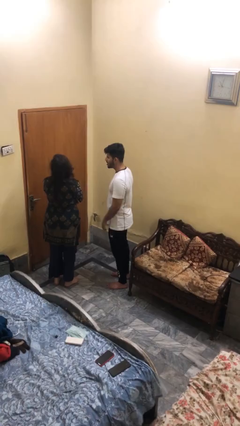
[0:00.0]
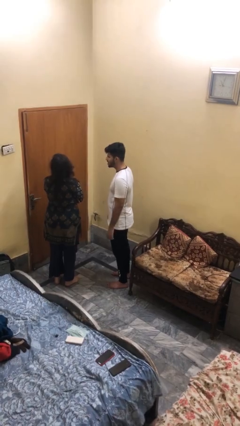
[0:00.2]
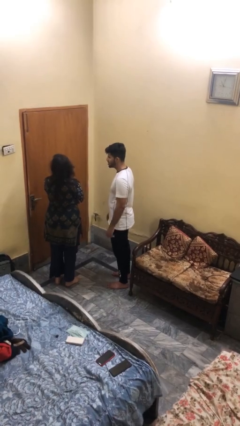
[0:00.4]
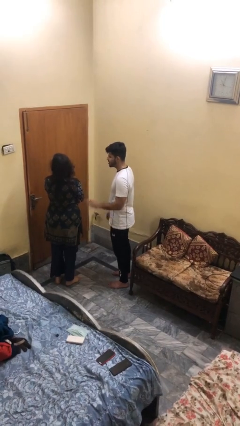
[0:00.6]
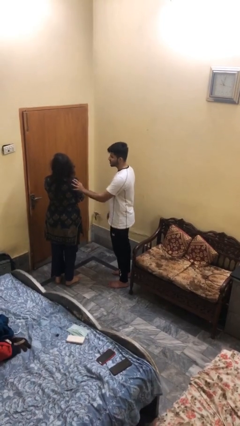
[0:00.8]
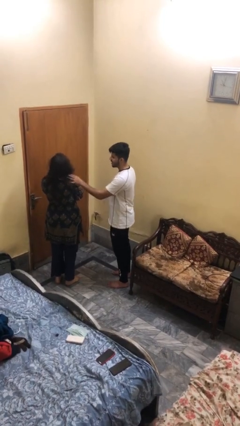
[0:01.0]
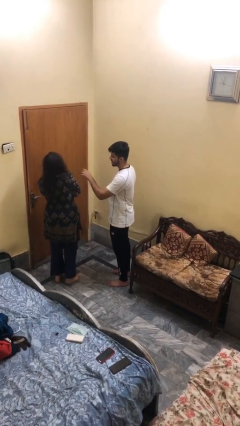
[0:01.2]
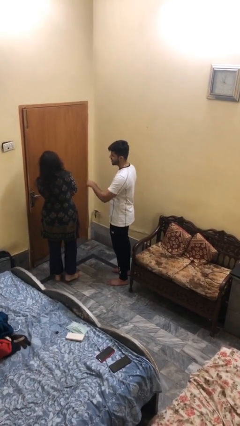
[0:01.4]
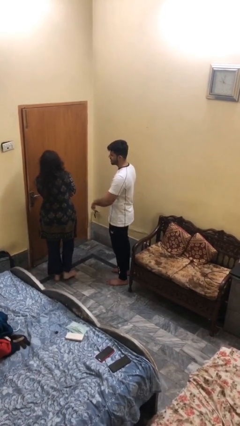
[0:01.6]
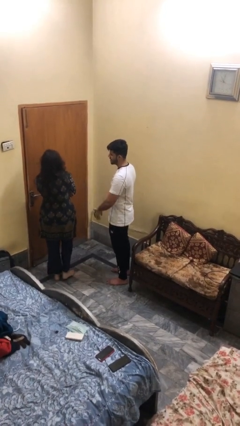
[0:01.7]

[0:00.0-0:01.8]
person shoves person

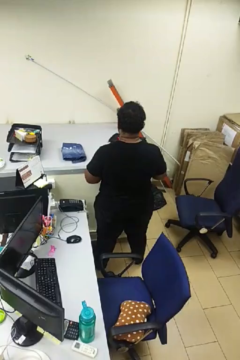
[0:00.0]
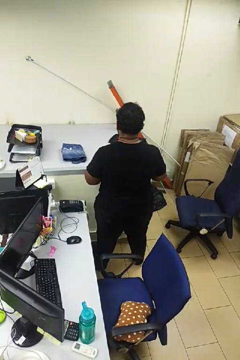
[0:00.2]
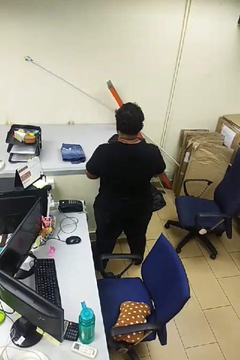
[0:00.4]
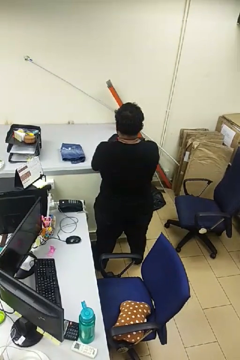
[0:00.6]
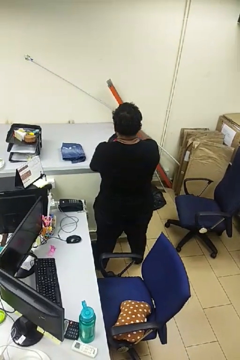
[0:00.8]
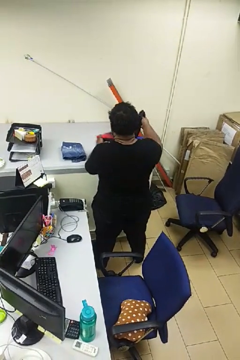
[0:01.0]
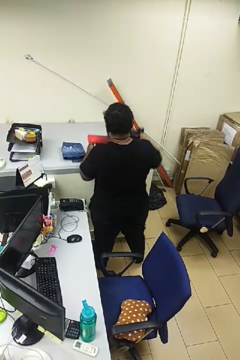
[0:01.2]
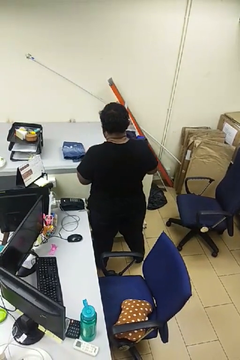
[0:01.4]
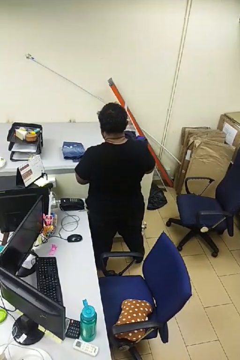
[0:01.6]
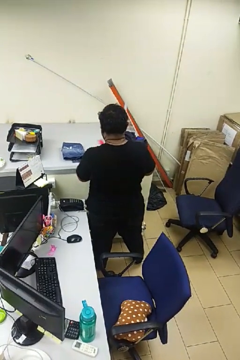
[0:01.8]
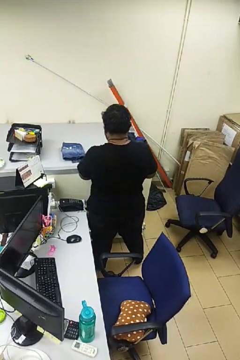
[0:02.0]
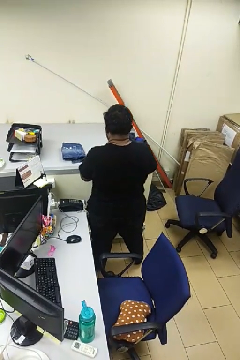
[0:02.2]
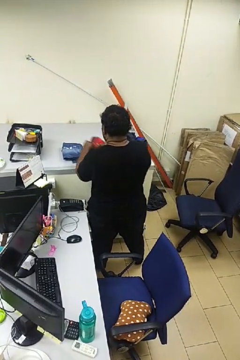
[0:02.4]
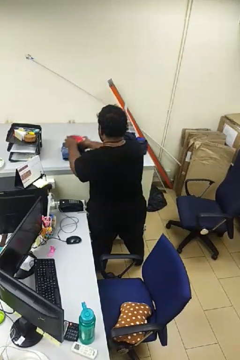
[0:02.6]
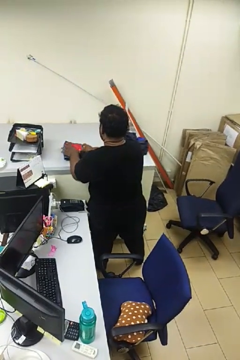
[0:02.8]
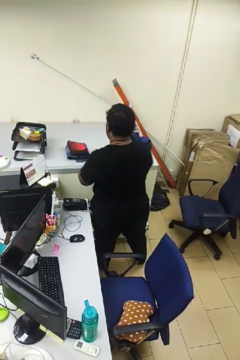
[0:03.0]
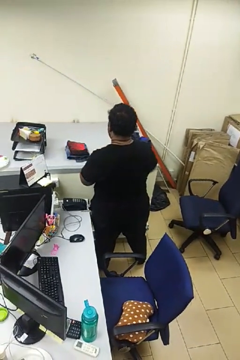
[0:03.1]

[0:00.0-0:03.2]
person folds shirt

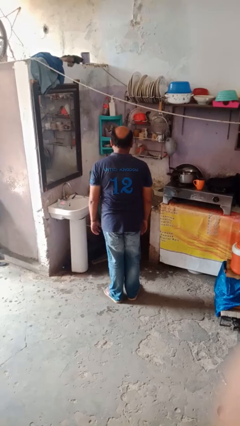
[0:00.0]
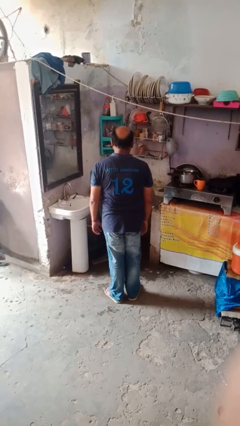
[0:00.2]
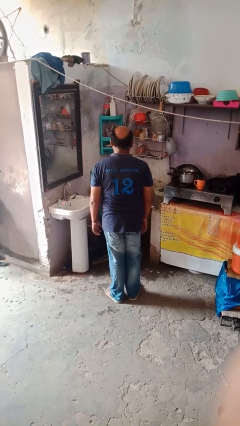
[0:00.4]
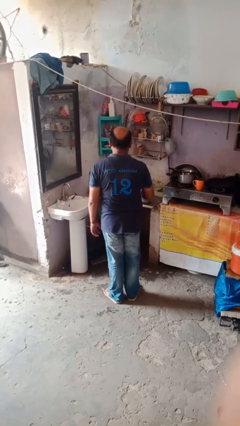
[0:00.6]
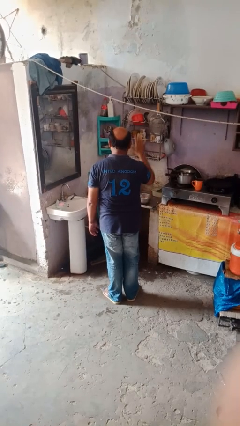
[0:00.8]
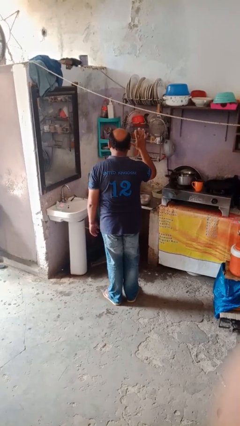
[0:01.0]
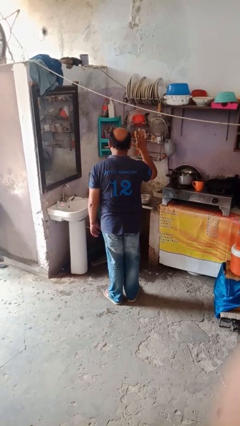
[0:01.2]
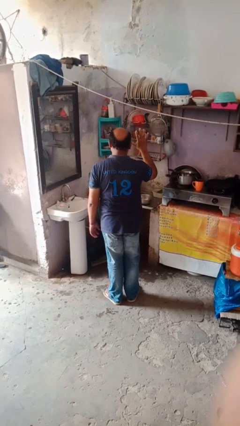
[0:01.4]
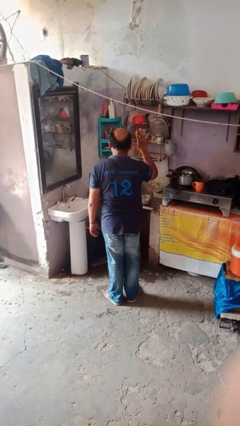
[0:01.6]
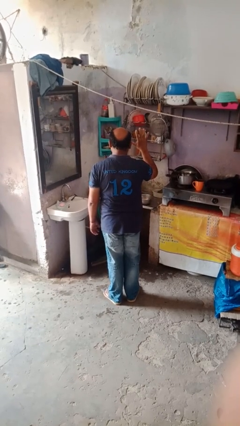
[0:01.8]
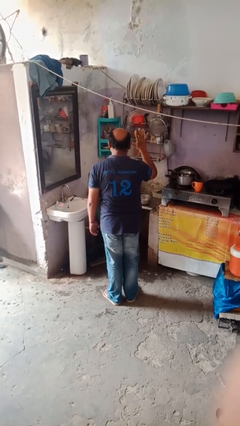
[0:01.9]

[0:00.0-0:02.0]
person gestures number five

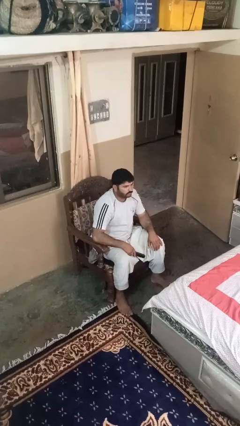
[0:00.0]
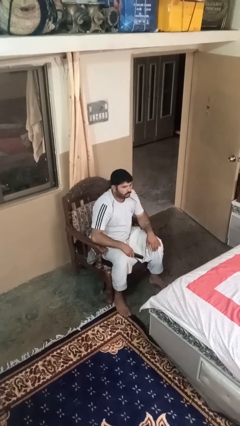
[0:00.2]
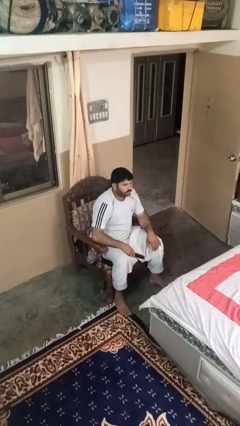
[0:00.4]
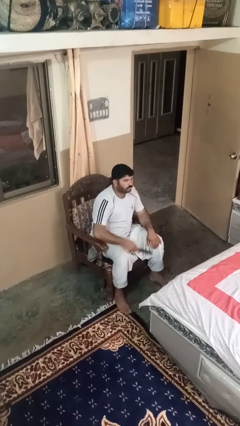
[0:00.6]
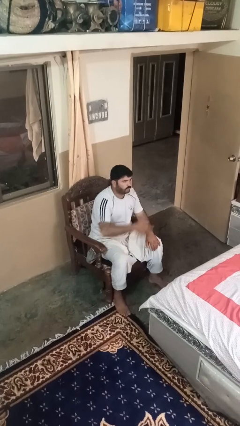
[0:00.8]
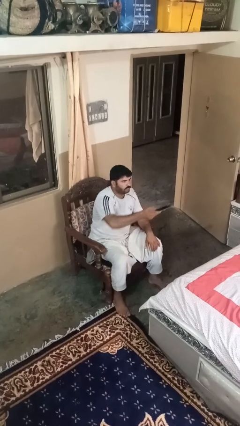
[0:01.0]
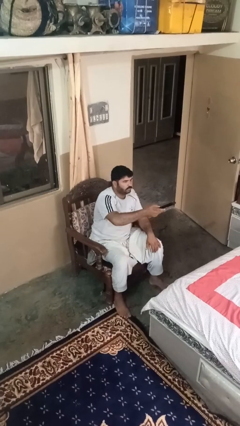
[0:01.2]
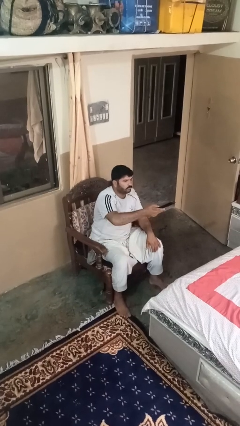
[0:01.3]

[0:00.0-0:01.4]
person uses television remote

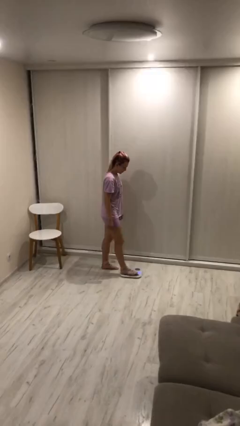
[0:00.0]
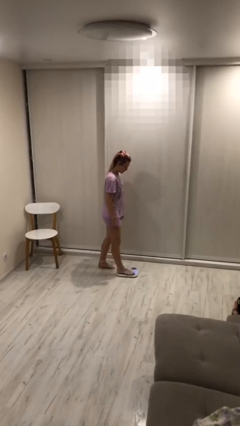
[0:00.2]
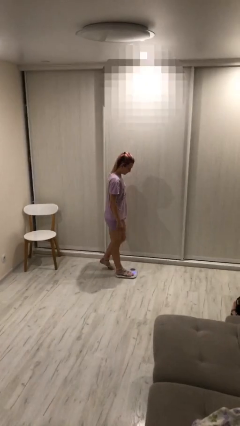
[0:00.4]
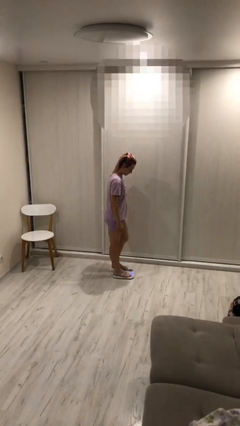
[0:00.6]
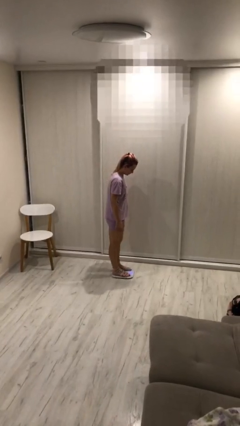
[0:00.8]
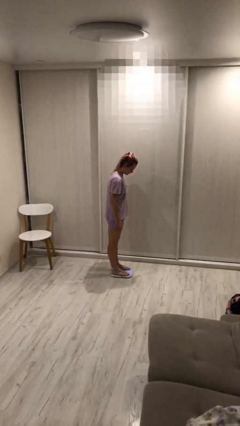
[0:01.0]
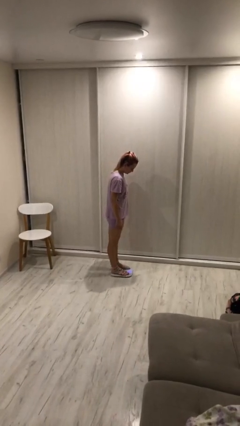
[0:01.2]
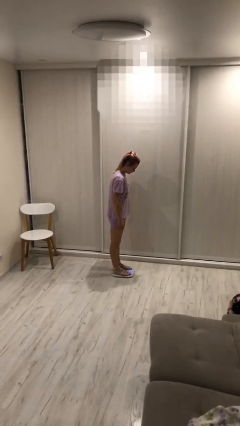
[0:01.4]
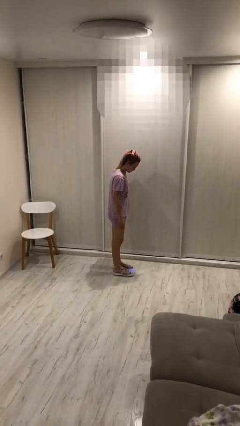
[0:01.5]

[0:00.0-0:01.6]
person uses bodyweight scale

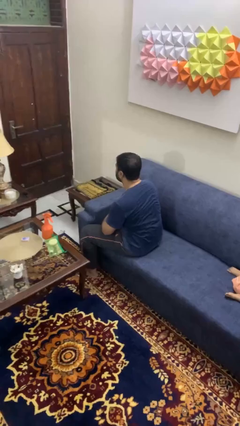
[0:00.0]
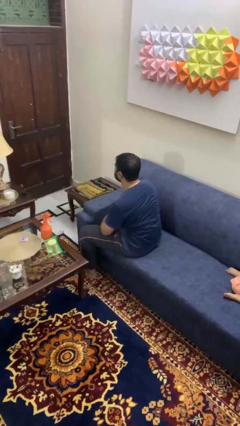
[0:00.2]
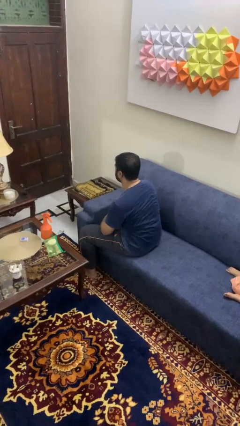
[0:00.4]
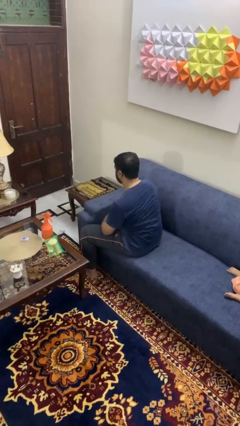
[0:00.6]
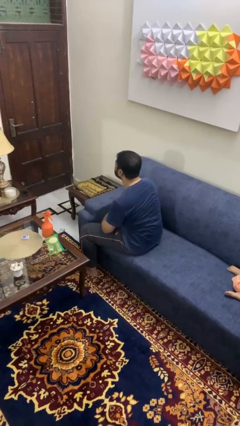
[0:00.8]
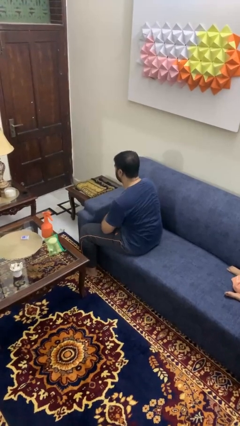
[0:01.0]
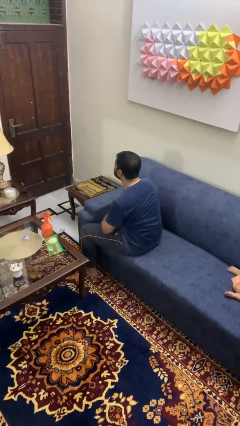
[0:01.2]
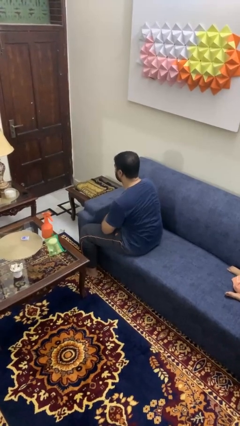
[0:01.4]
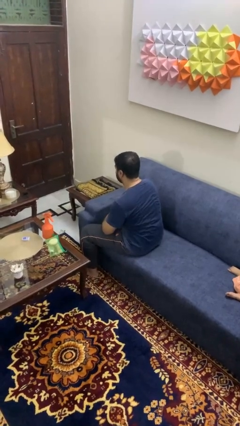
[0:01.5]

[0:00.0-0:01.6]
person nods head

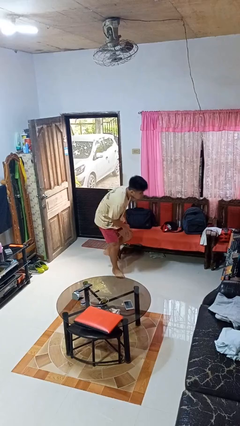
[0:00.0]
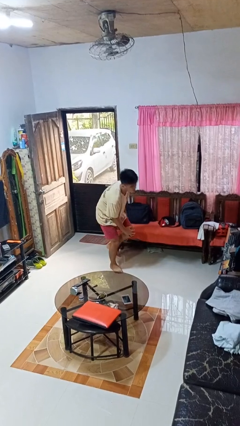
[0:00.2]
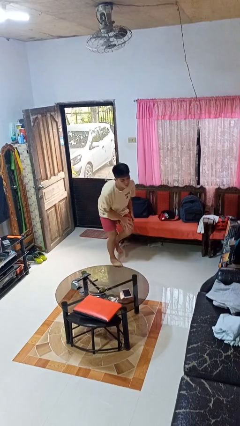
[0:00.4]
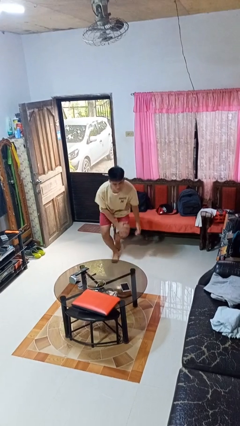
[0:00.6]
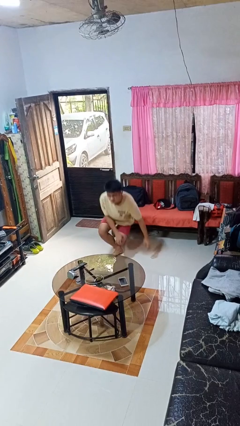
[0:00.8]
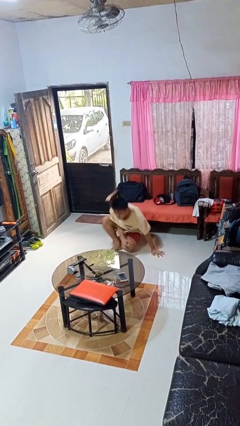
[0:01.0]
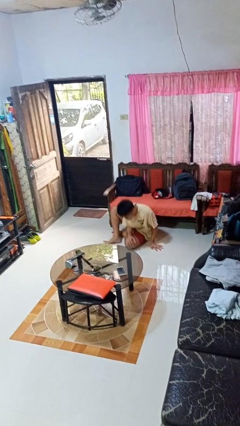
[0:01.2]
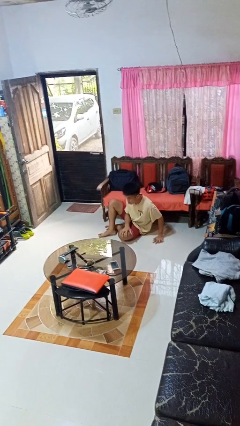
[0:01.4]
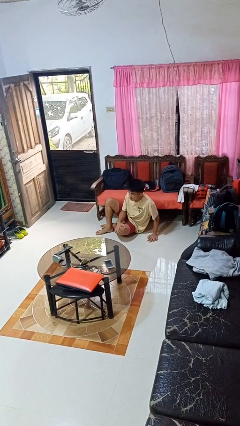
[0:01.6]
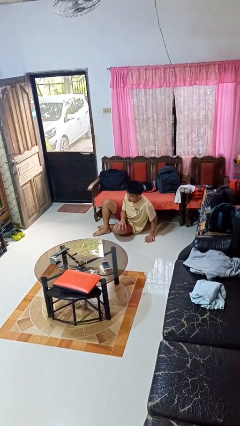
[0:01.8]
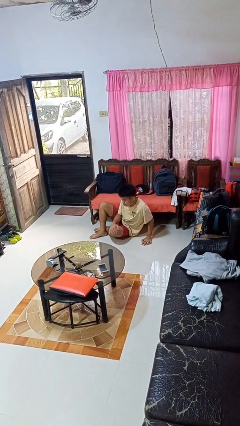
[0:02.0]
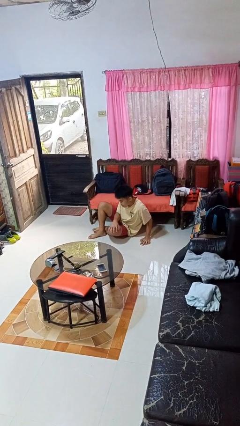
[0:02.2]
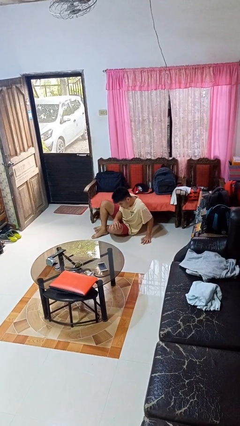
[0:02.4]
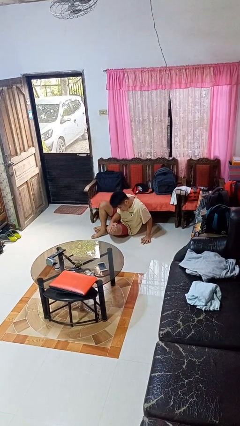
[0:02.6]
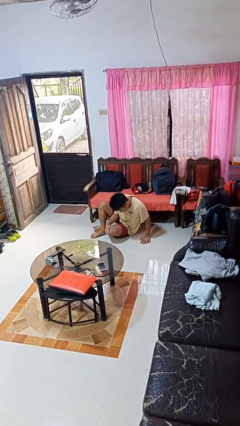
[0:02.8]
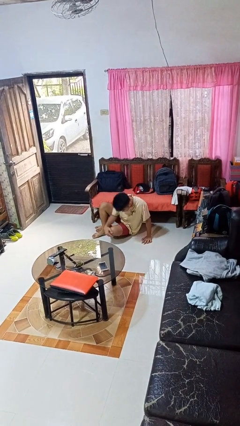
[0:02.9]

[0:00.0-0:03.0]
person lies down on floor

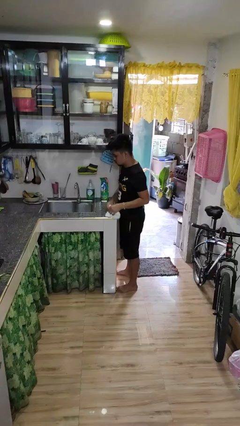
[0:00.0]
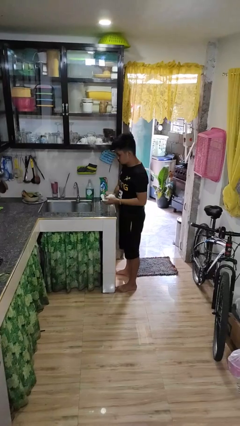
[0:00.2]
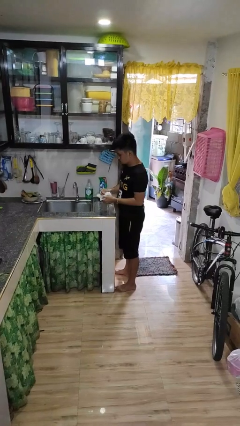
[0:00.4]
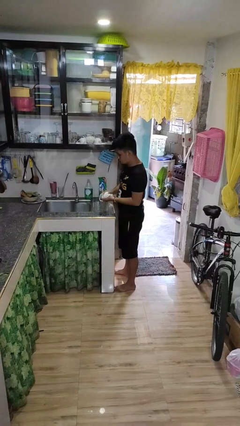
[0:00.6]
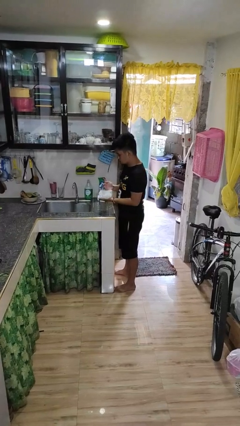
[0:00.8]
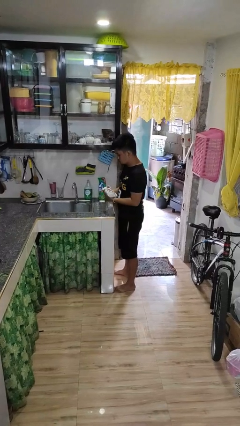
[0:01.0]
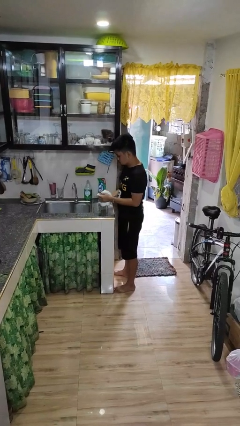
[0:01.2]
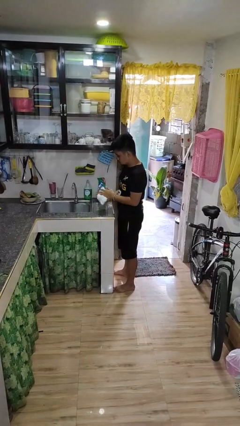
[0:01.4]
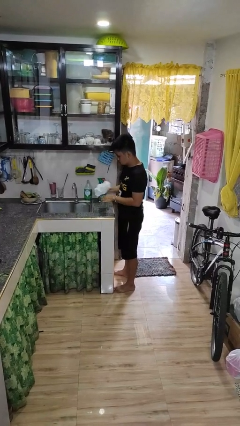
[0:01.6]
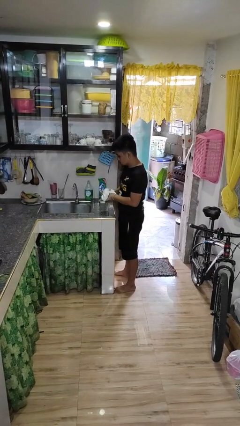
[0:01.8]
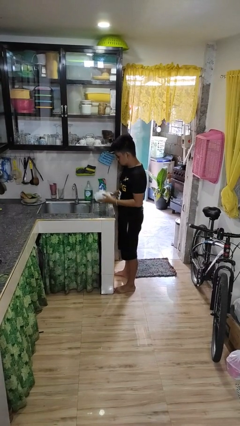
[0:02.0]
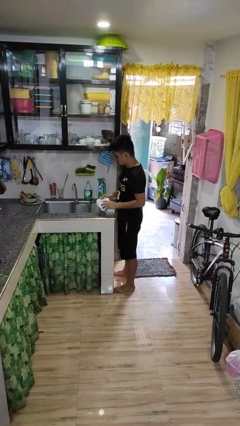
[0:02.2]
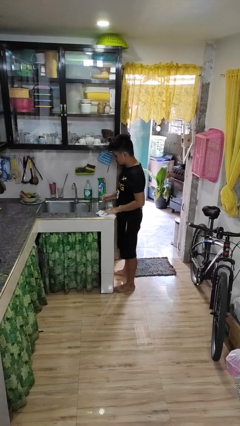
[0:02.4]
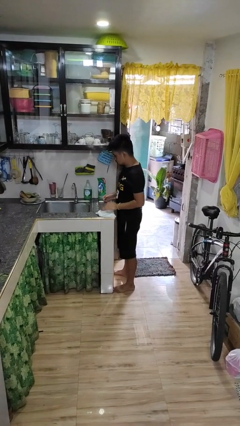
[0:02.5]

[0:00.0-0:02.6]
person dries hands with towel
